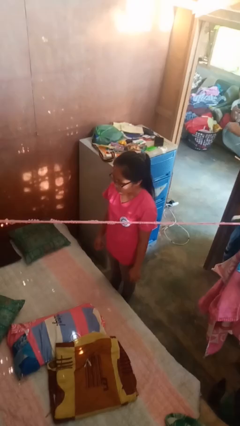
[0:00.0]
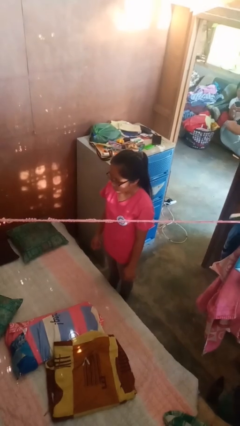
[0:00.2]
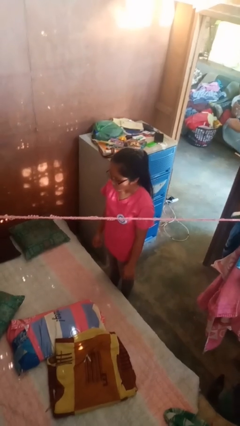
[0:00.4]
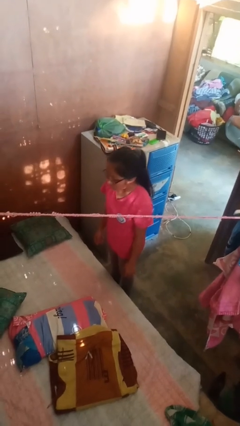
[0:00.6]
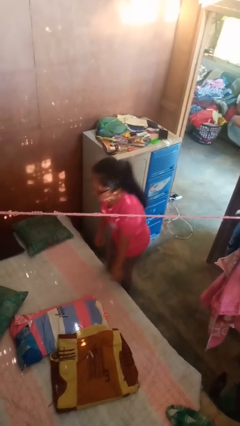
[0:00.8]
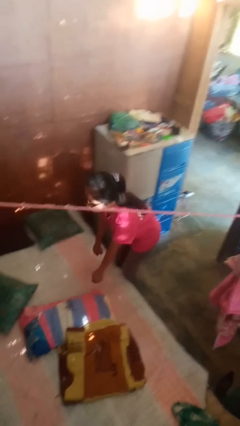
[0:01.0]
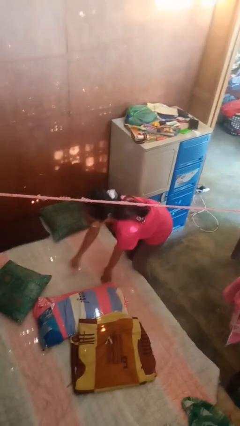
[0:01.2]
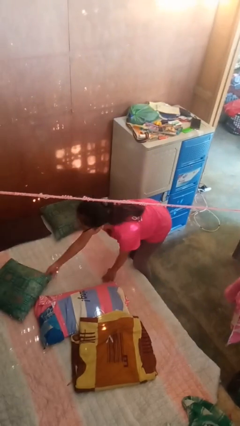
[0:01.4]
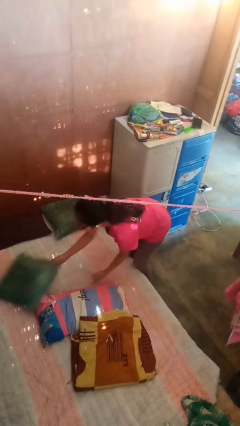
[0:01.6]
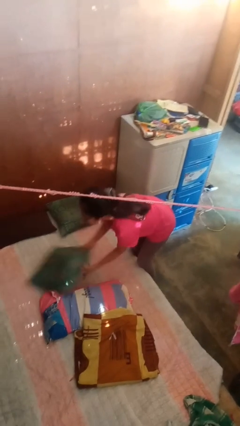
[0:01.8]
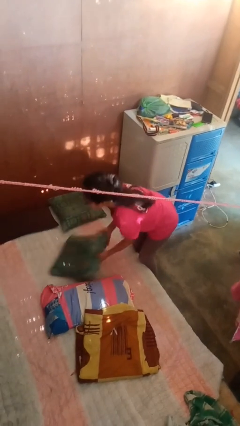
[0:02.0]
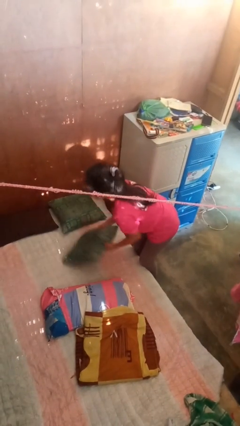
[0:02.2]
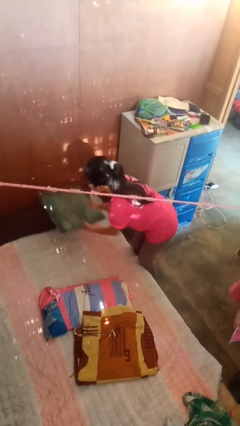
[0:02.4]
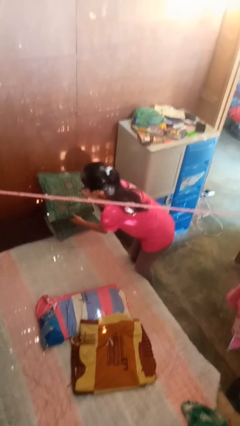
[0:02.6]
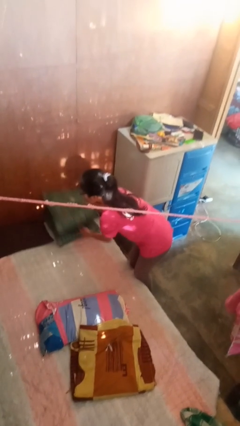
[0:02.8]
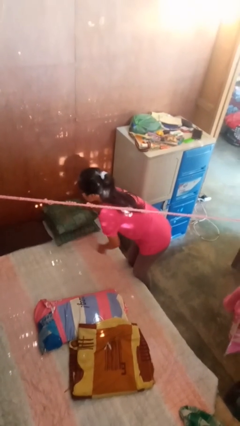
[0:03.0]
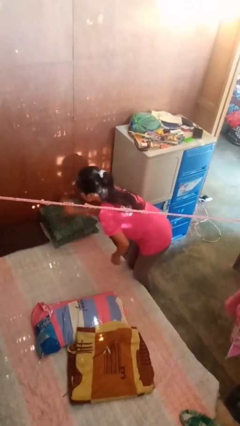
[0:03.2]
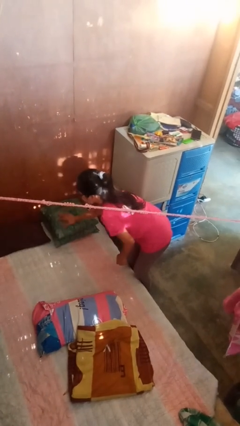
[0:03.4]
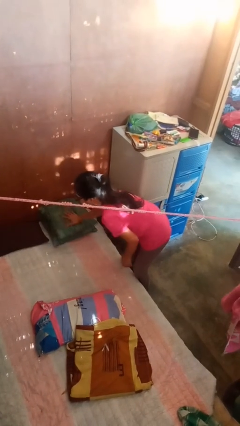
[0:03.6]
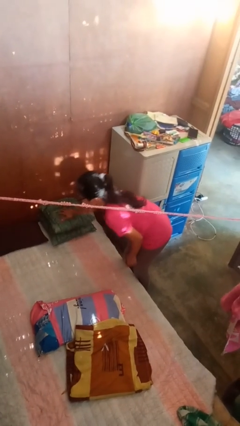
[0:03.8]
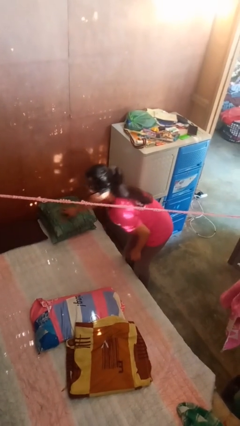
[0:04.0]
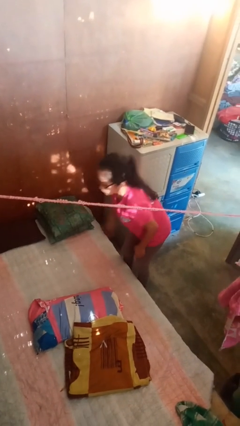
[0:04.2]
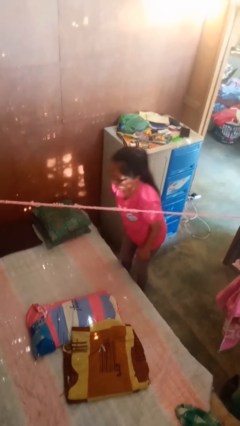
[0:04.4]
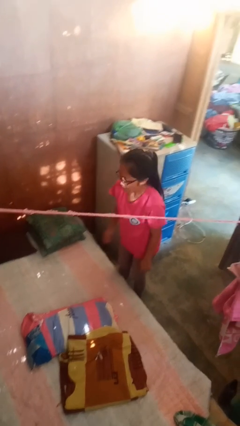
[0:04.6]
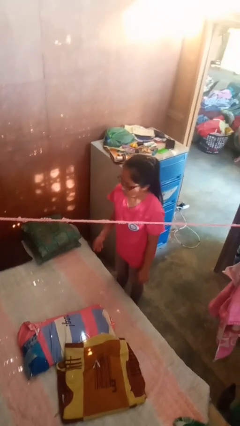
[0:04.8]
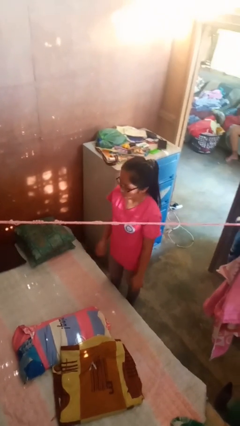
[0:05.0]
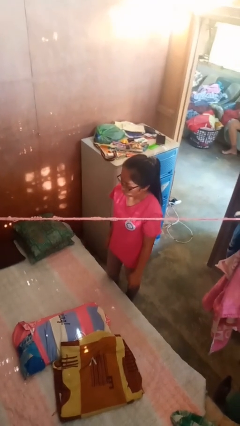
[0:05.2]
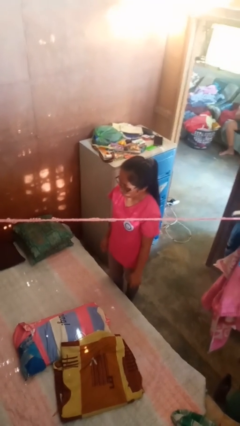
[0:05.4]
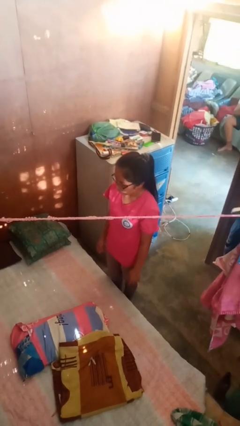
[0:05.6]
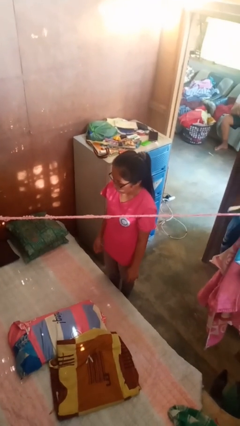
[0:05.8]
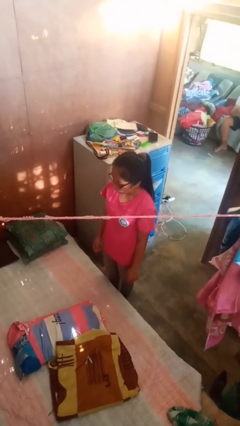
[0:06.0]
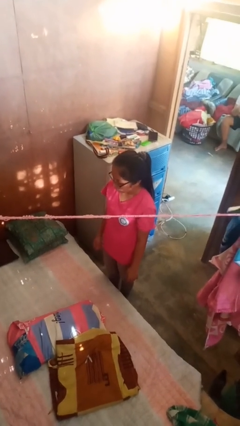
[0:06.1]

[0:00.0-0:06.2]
person makes bed

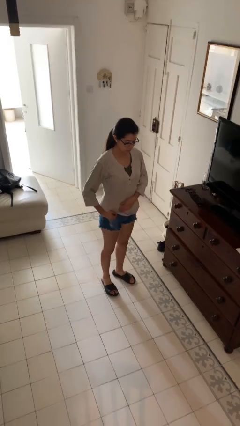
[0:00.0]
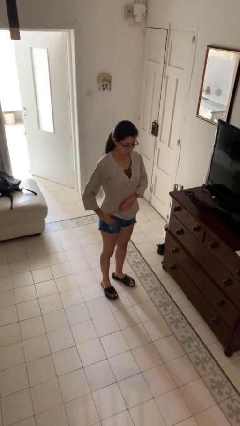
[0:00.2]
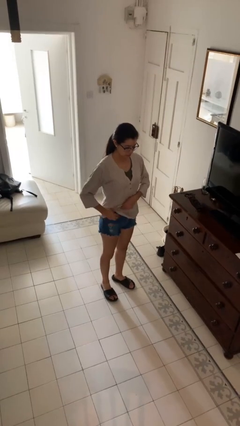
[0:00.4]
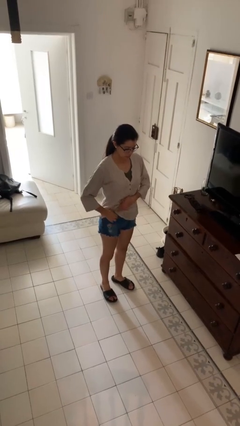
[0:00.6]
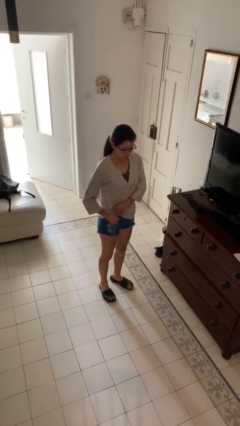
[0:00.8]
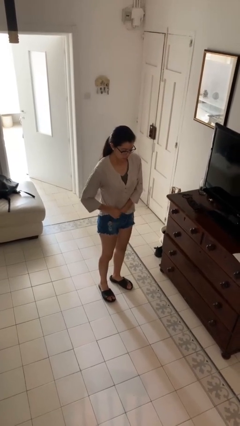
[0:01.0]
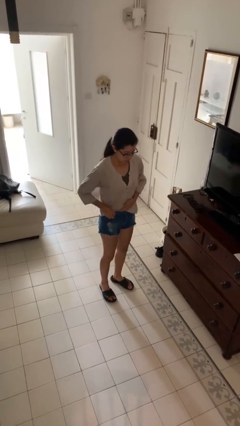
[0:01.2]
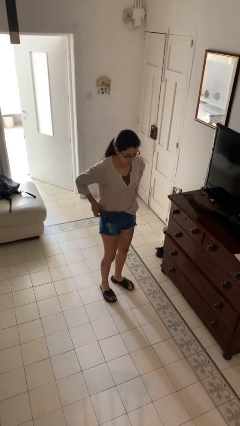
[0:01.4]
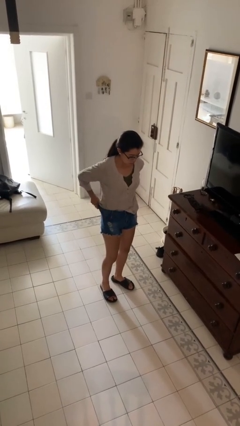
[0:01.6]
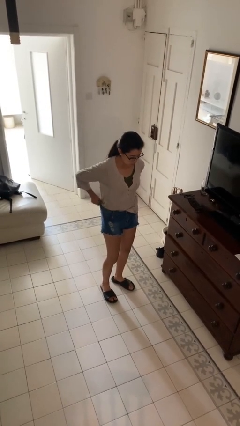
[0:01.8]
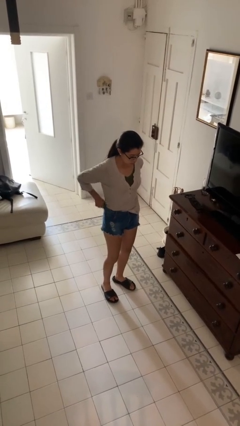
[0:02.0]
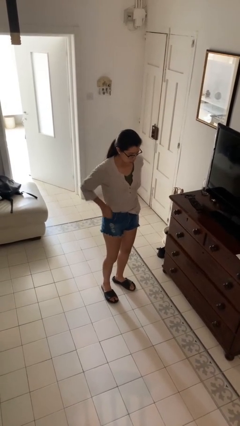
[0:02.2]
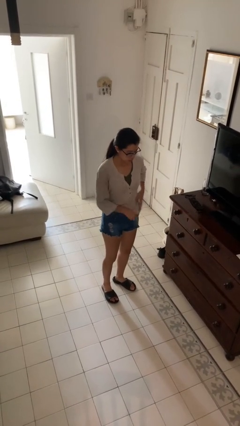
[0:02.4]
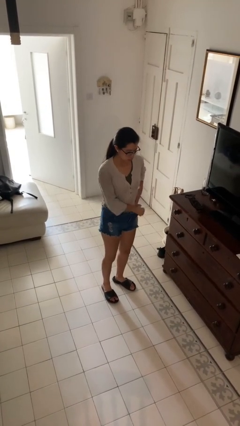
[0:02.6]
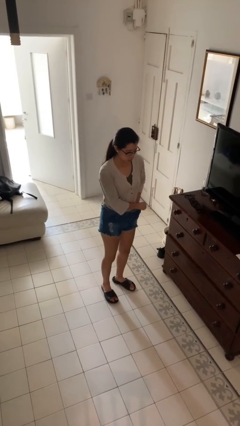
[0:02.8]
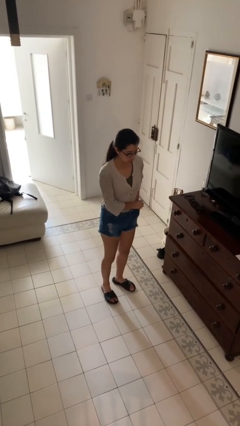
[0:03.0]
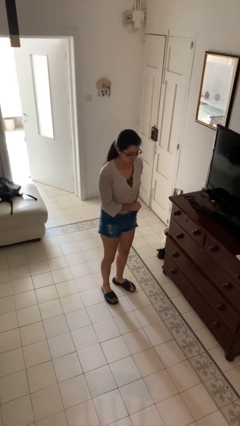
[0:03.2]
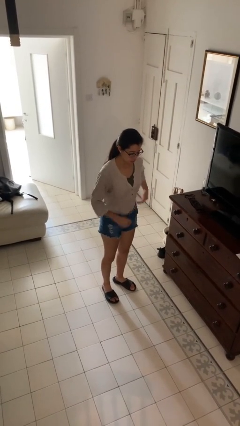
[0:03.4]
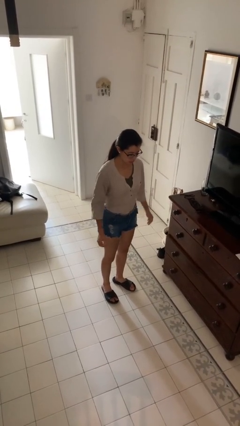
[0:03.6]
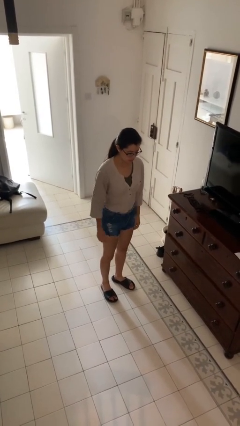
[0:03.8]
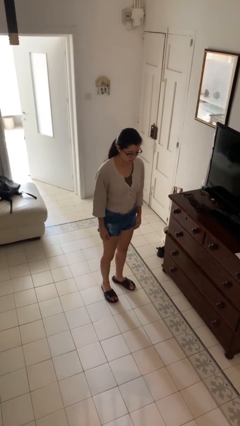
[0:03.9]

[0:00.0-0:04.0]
person tucks in shirt

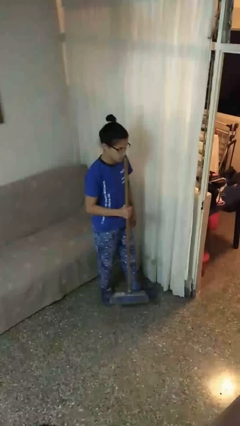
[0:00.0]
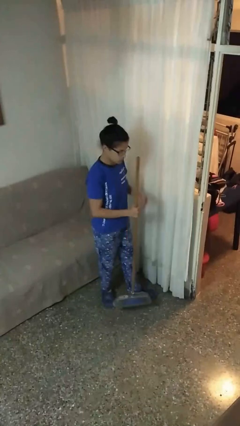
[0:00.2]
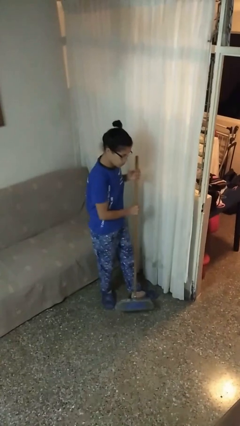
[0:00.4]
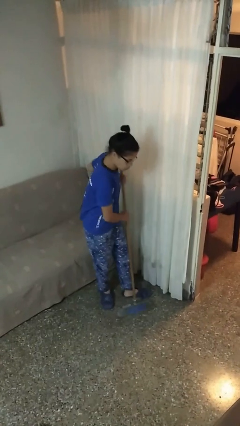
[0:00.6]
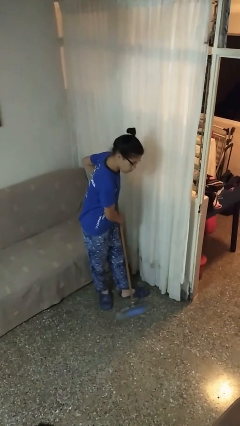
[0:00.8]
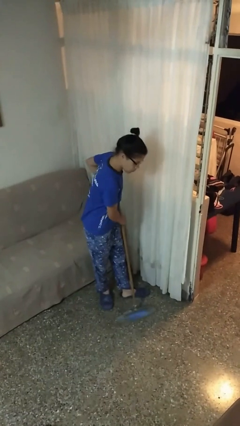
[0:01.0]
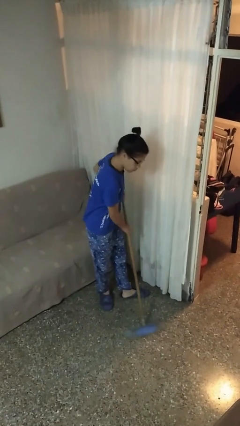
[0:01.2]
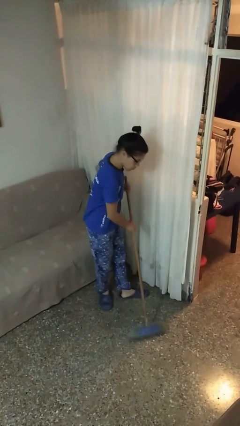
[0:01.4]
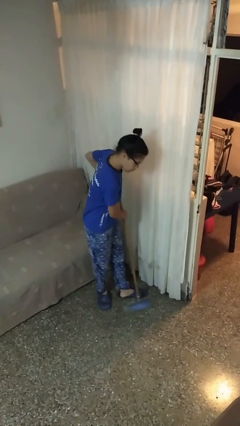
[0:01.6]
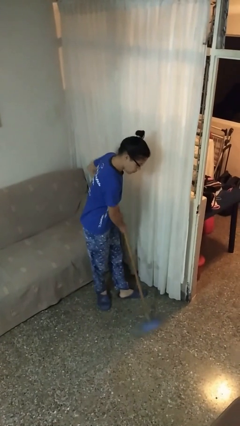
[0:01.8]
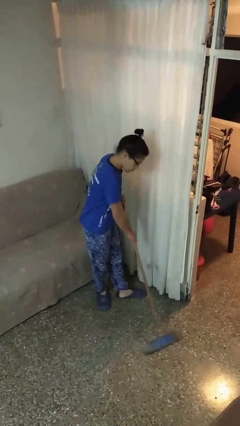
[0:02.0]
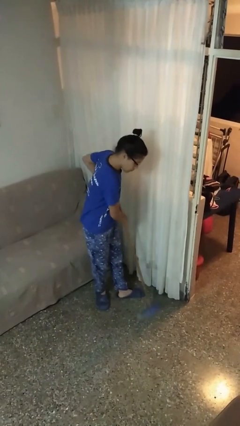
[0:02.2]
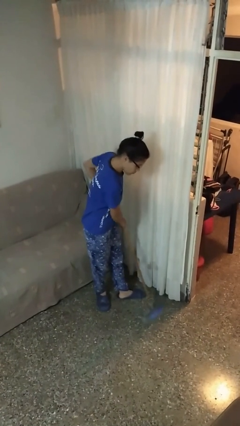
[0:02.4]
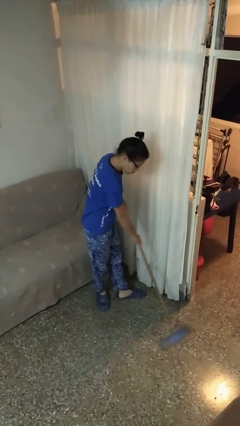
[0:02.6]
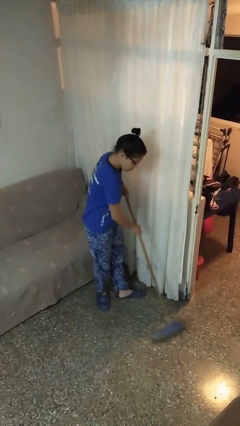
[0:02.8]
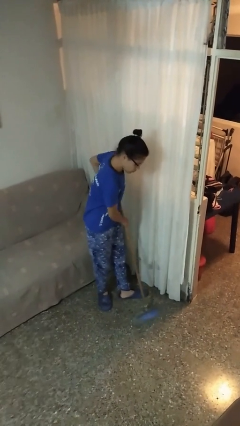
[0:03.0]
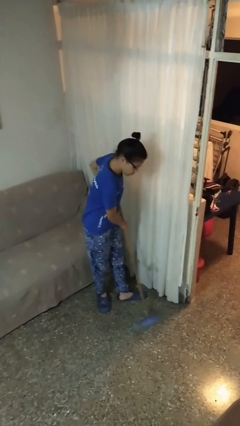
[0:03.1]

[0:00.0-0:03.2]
person sweeps floor

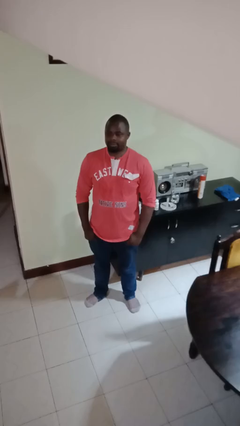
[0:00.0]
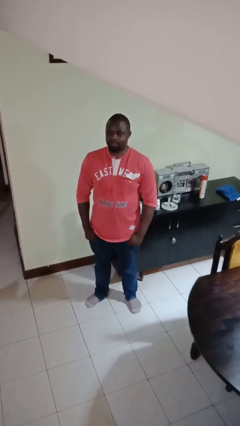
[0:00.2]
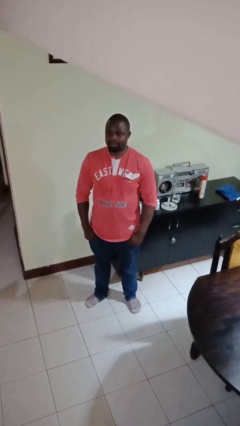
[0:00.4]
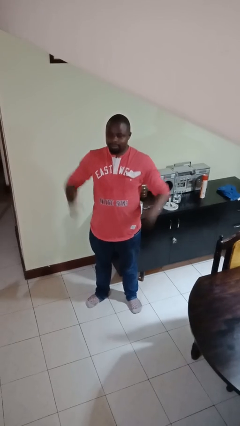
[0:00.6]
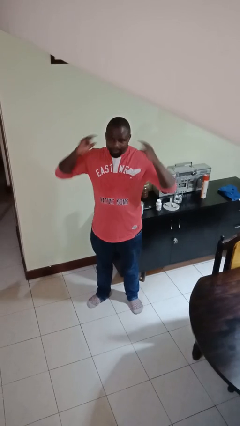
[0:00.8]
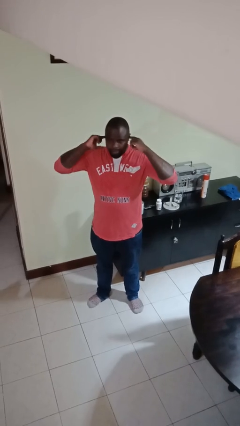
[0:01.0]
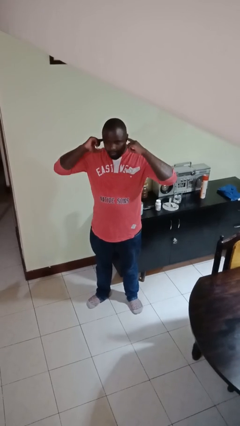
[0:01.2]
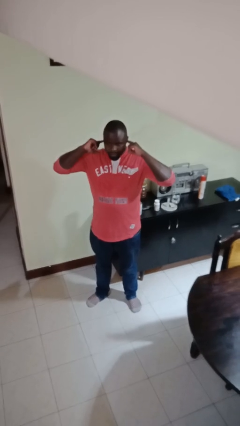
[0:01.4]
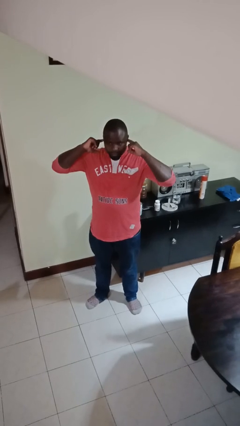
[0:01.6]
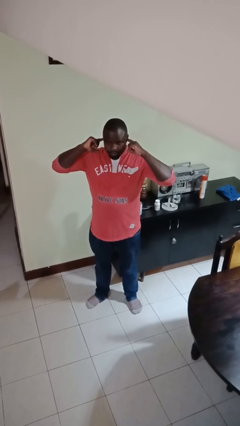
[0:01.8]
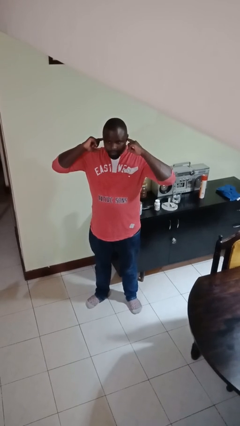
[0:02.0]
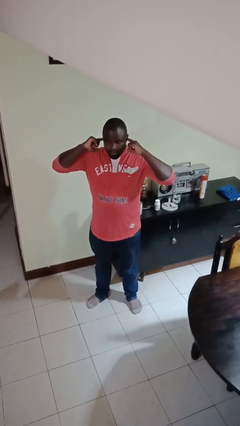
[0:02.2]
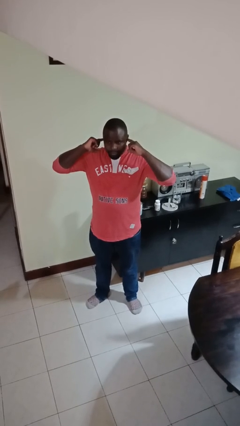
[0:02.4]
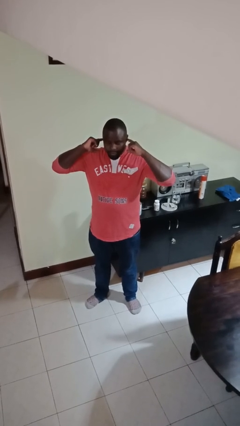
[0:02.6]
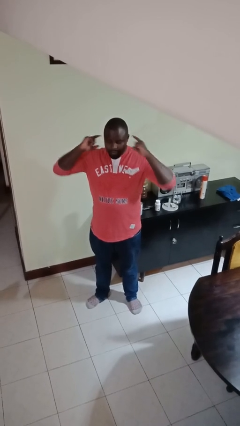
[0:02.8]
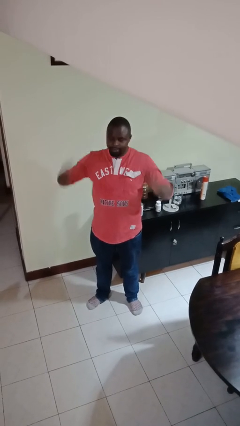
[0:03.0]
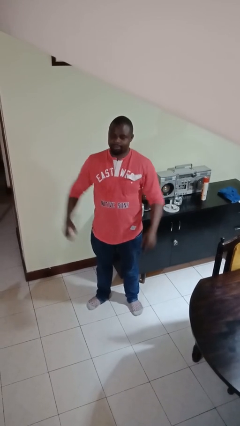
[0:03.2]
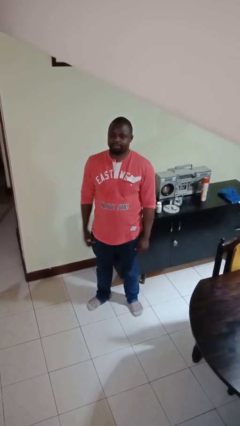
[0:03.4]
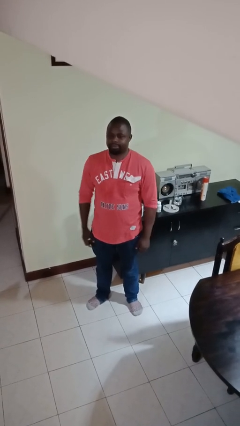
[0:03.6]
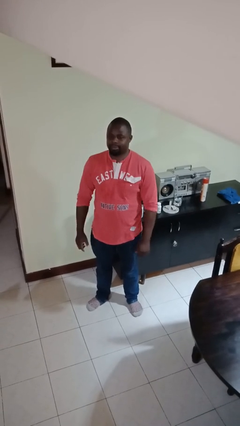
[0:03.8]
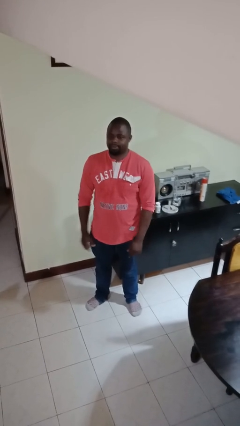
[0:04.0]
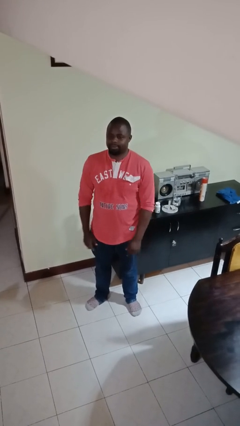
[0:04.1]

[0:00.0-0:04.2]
person puts fingers in ear

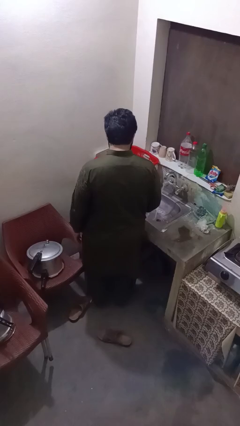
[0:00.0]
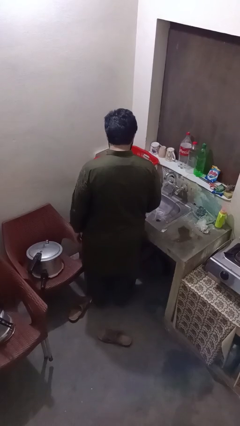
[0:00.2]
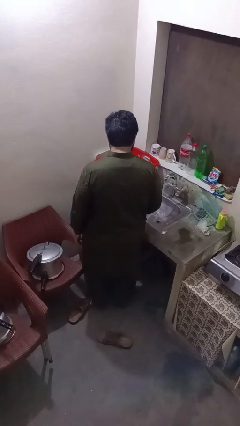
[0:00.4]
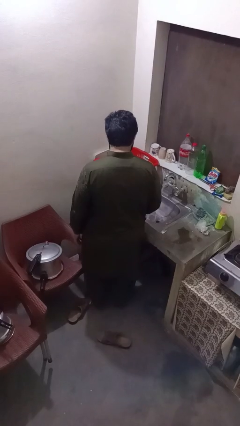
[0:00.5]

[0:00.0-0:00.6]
person turns off faucet
